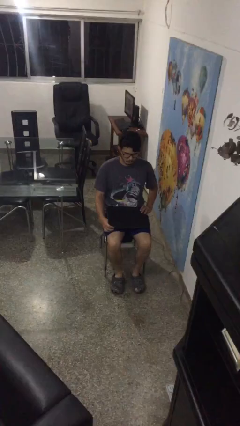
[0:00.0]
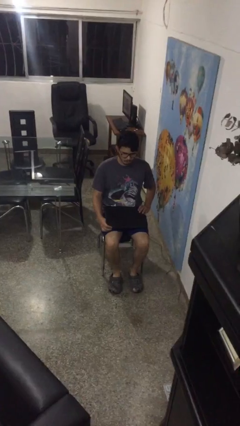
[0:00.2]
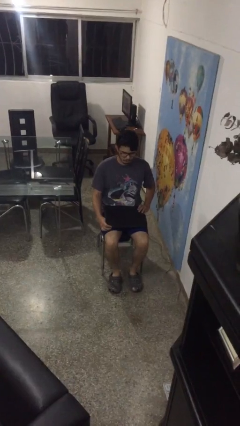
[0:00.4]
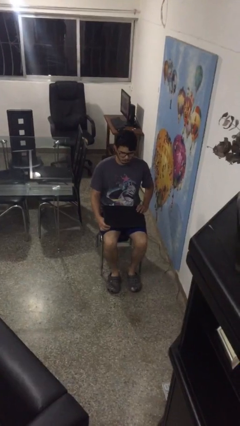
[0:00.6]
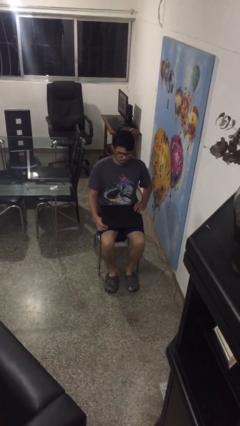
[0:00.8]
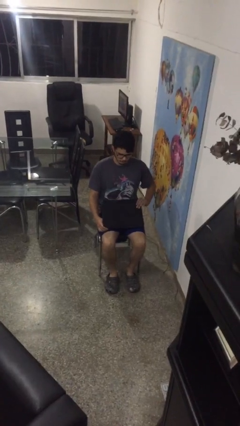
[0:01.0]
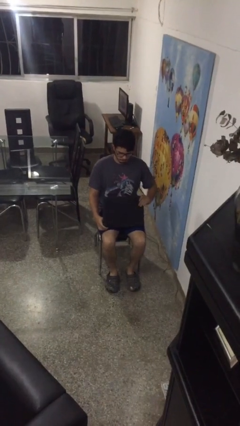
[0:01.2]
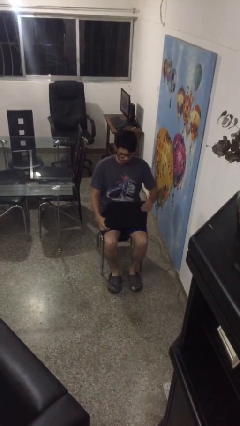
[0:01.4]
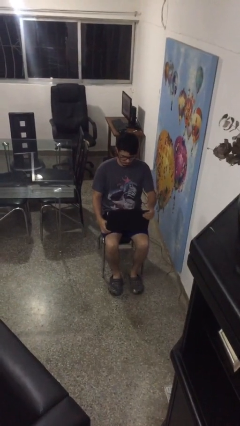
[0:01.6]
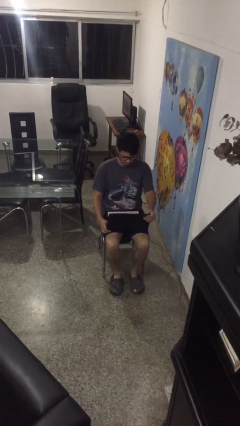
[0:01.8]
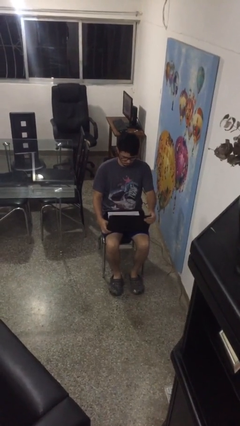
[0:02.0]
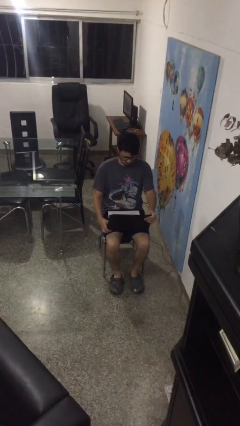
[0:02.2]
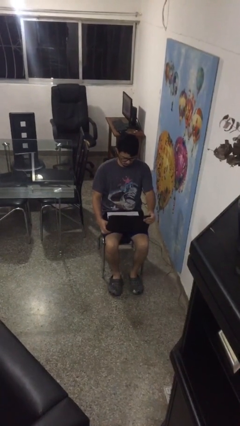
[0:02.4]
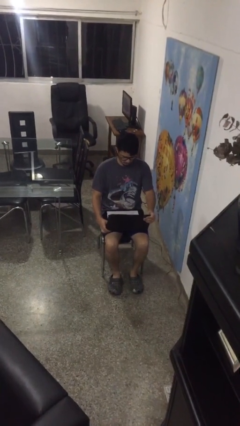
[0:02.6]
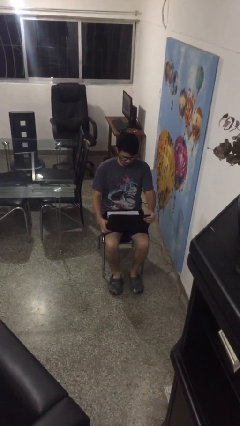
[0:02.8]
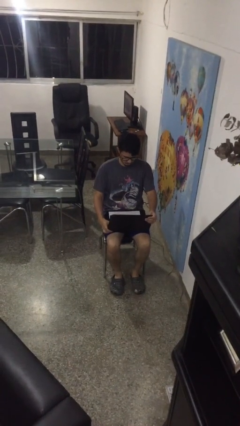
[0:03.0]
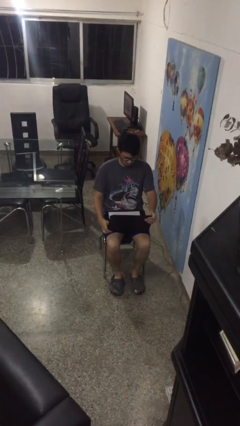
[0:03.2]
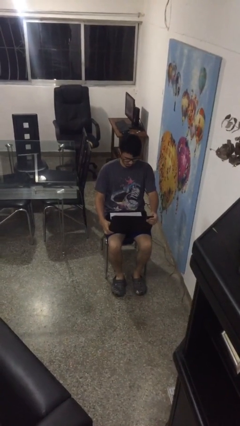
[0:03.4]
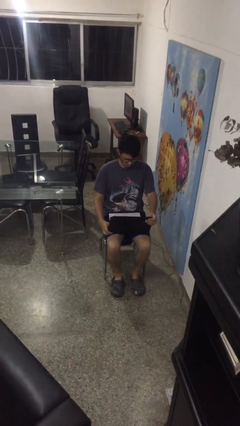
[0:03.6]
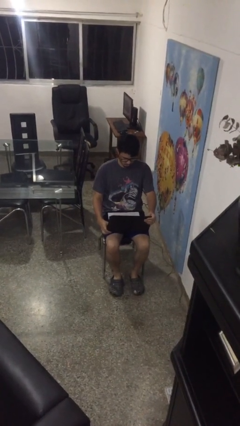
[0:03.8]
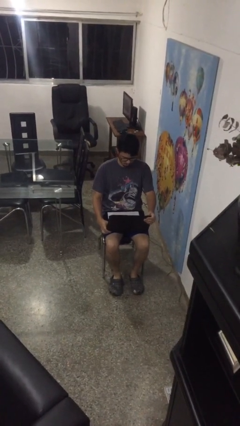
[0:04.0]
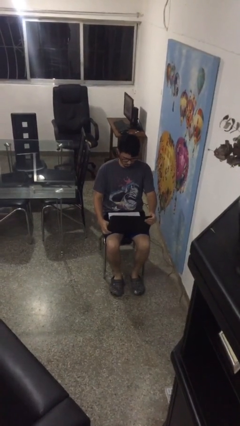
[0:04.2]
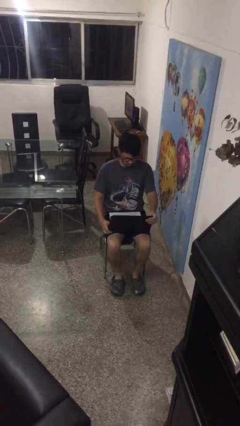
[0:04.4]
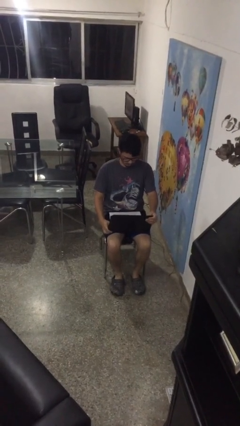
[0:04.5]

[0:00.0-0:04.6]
person opens laptop

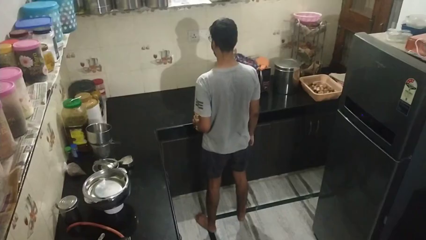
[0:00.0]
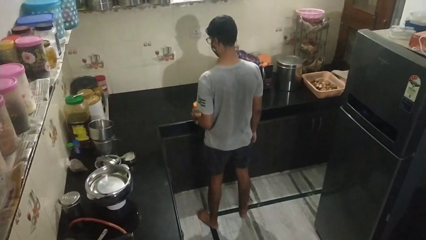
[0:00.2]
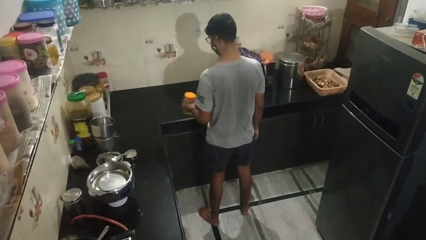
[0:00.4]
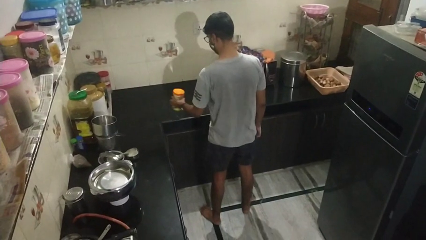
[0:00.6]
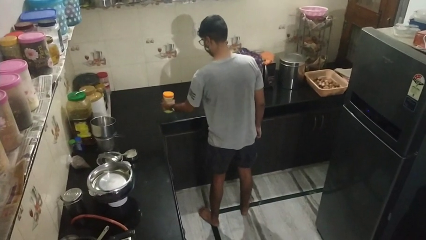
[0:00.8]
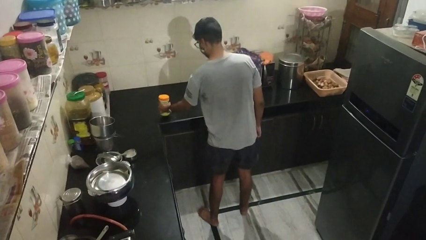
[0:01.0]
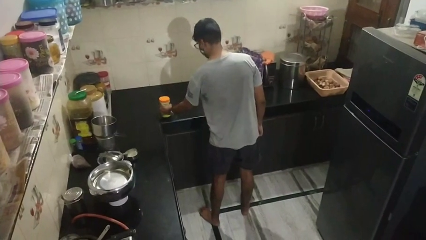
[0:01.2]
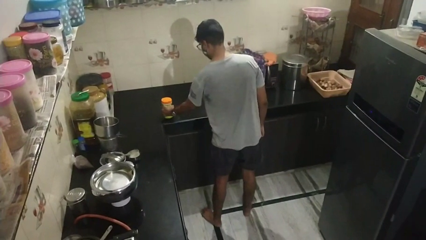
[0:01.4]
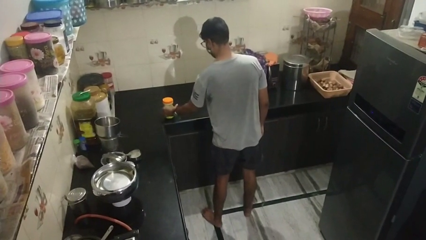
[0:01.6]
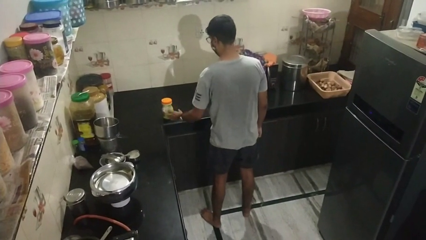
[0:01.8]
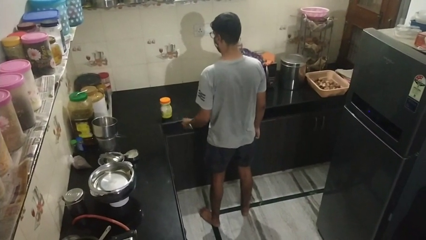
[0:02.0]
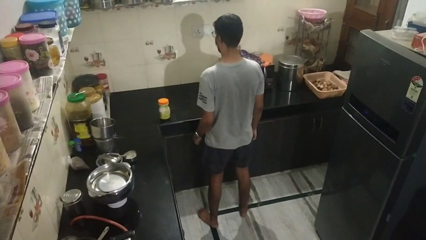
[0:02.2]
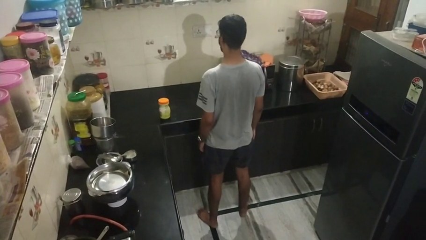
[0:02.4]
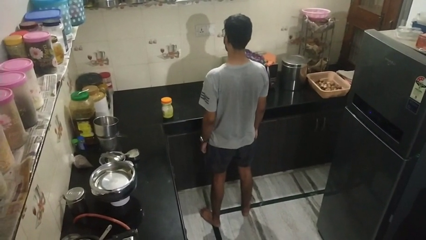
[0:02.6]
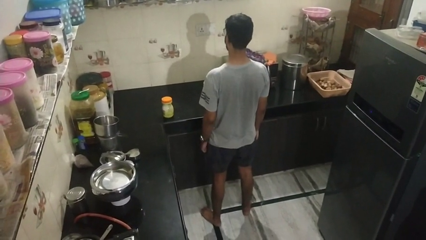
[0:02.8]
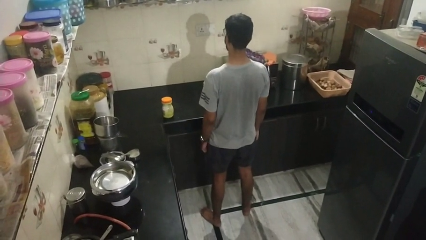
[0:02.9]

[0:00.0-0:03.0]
person puts down object on countertop

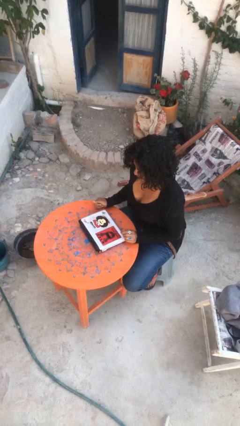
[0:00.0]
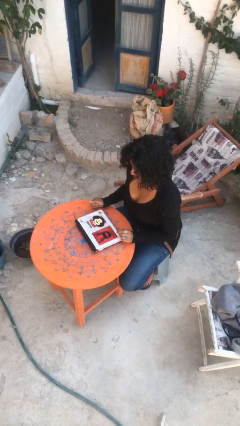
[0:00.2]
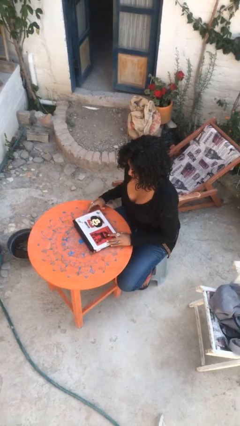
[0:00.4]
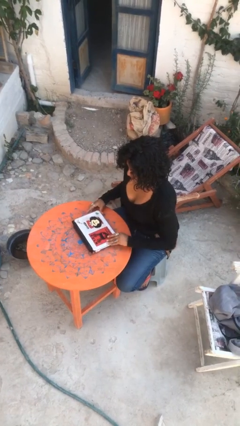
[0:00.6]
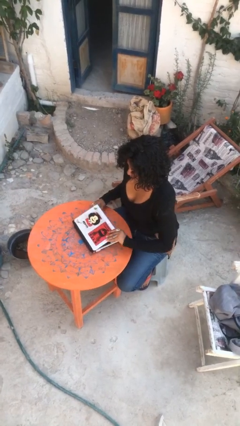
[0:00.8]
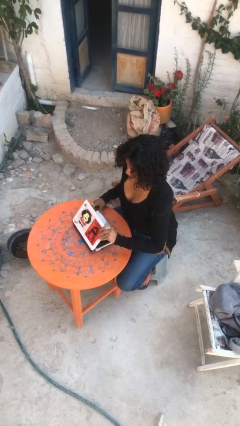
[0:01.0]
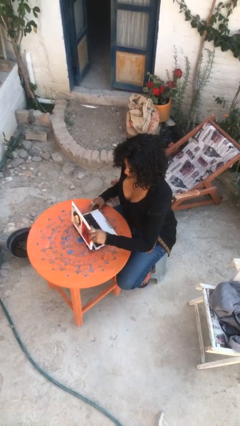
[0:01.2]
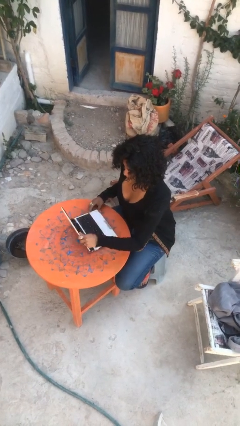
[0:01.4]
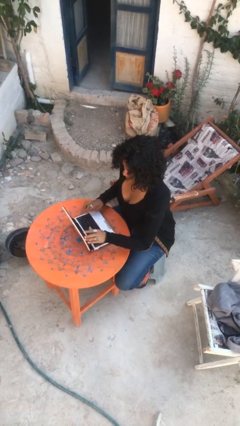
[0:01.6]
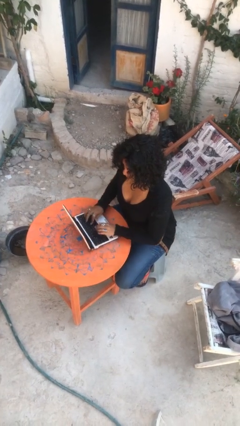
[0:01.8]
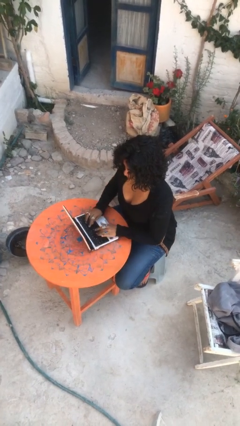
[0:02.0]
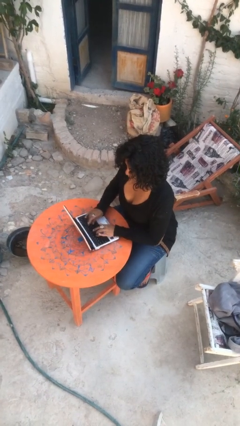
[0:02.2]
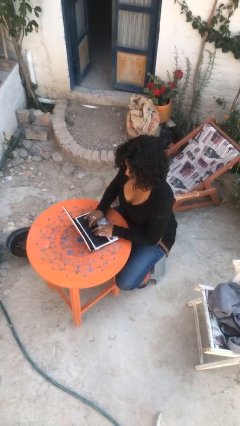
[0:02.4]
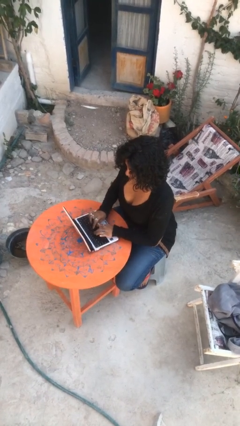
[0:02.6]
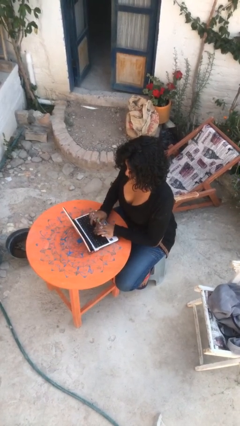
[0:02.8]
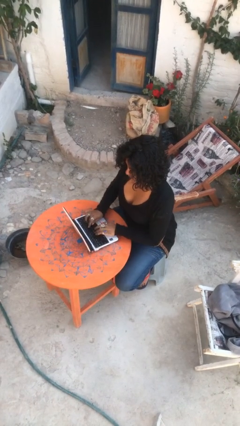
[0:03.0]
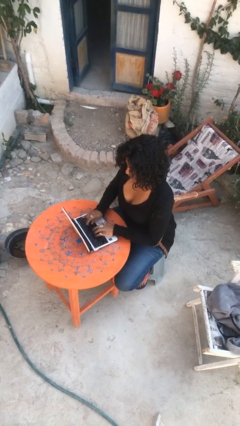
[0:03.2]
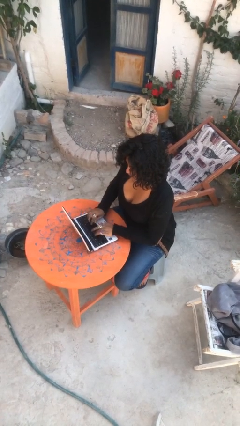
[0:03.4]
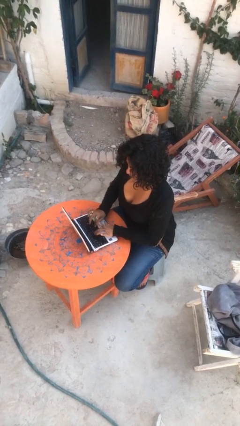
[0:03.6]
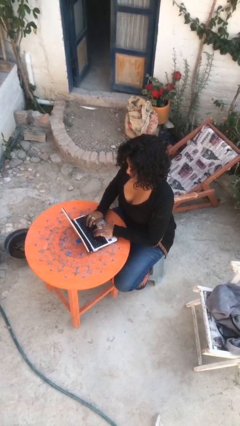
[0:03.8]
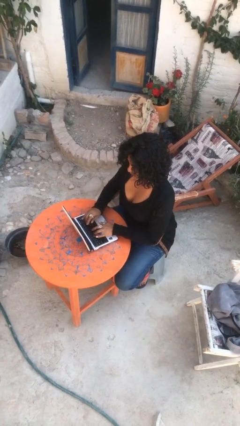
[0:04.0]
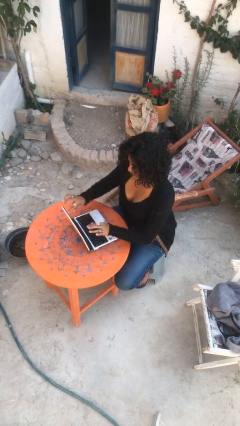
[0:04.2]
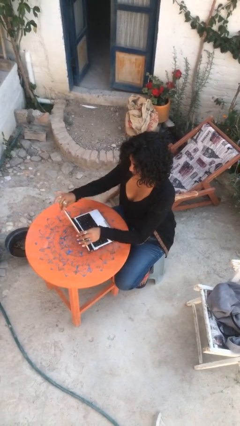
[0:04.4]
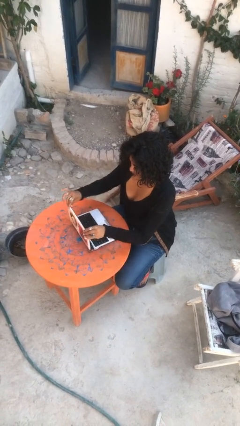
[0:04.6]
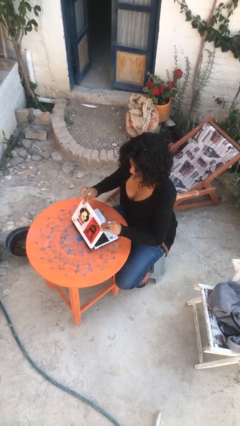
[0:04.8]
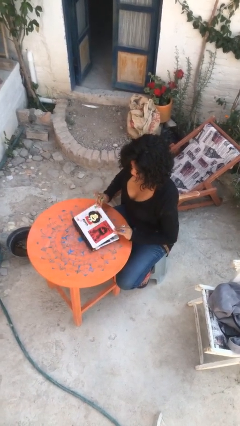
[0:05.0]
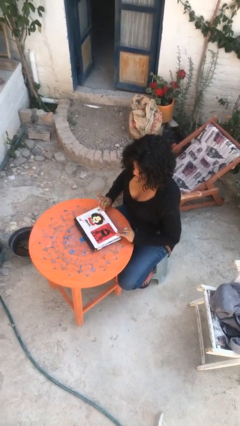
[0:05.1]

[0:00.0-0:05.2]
person interacts with laptop

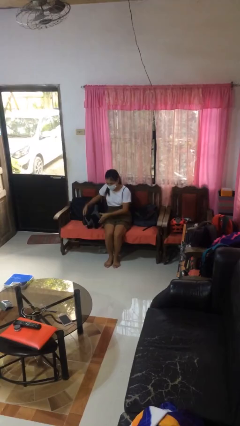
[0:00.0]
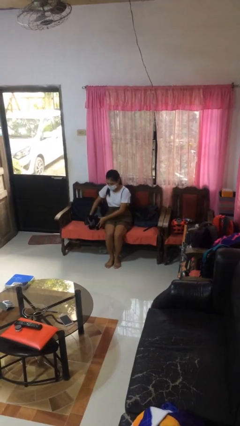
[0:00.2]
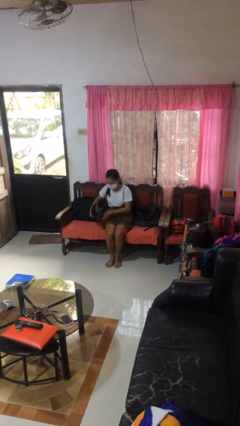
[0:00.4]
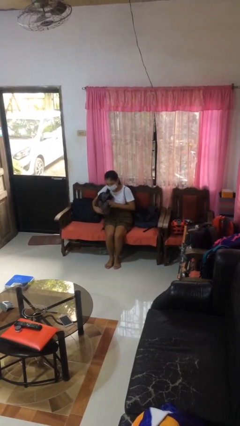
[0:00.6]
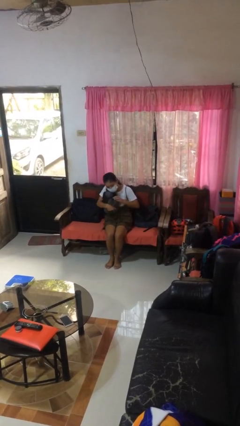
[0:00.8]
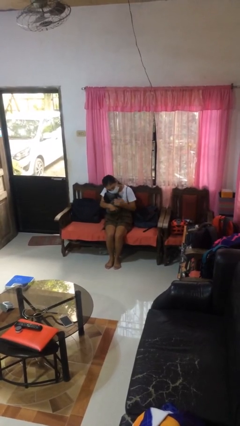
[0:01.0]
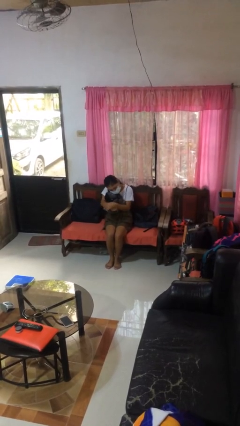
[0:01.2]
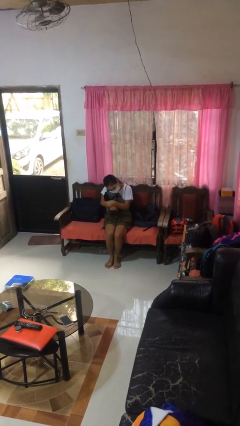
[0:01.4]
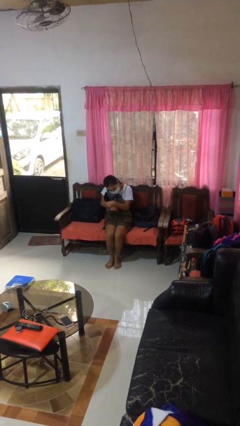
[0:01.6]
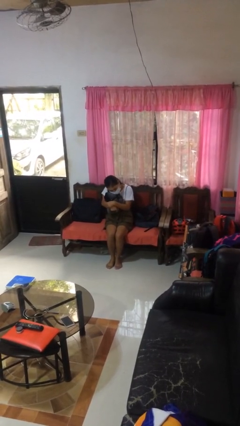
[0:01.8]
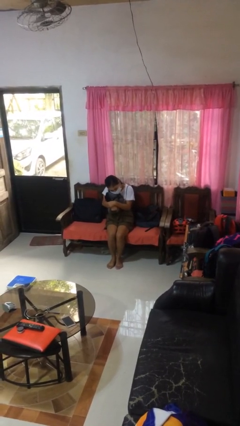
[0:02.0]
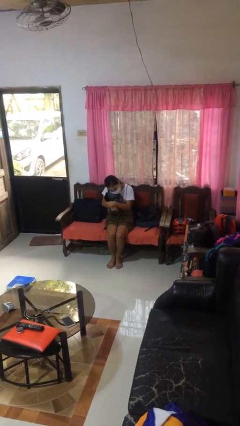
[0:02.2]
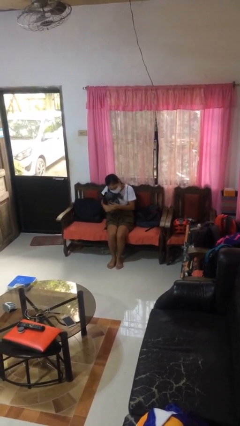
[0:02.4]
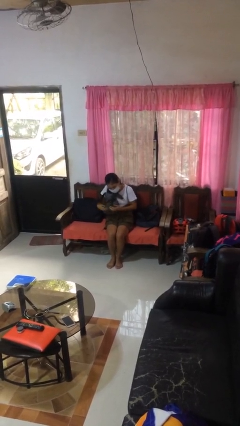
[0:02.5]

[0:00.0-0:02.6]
person hugs stuffed animal

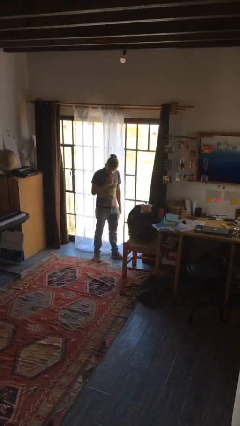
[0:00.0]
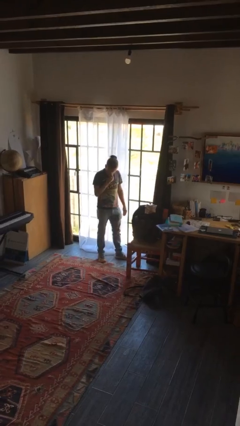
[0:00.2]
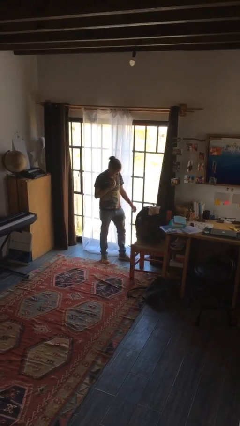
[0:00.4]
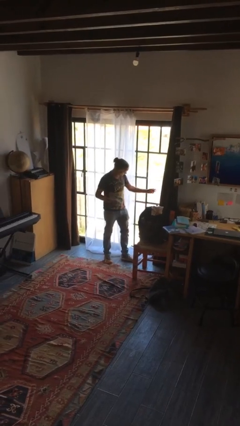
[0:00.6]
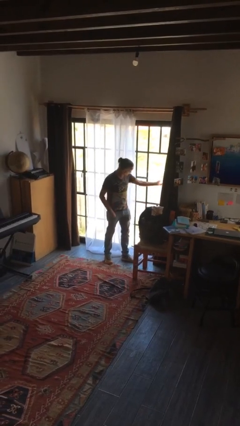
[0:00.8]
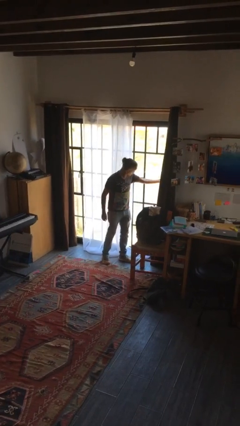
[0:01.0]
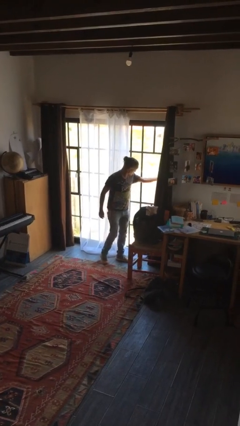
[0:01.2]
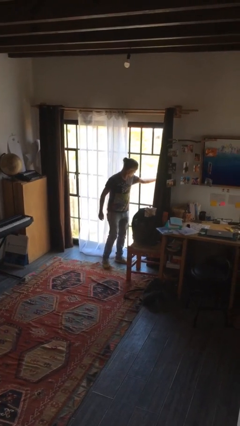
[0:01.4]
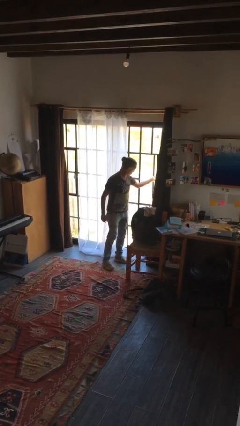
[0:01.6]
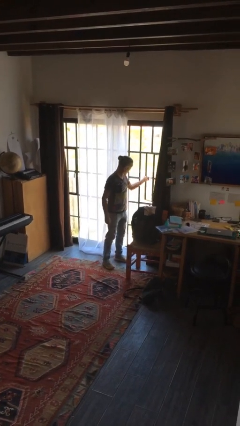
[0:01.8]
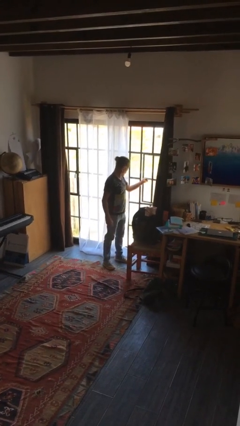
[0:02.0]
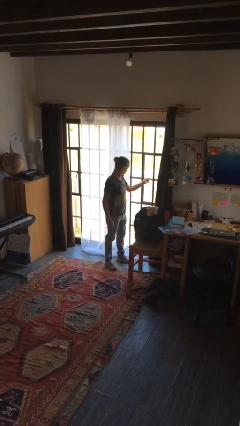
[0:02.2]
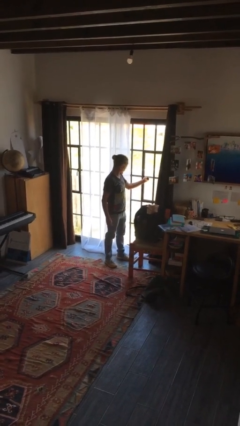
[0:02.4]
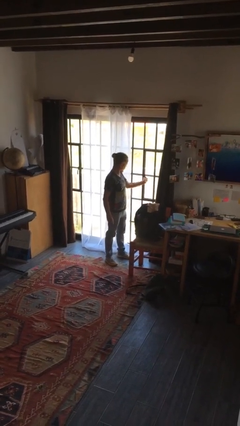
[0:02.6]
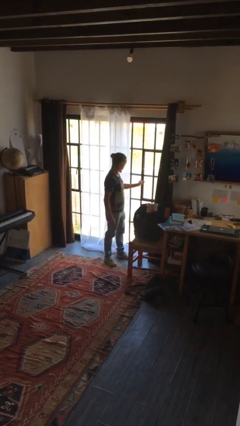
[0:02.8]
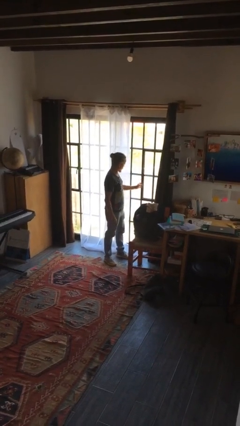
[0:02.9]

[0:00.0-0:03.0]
person closes home window
